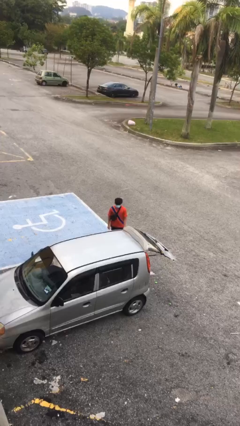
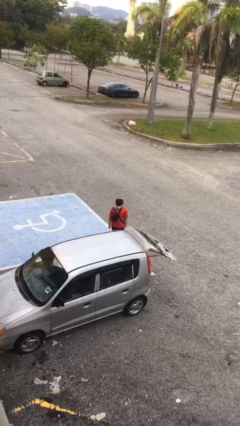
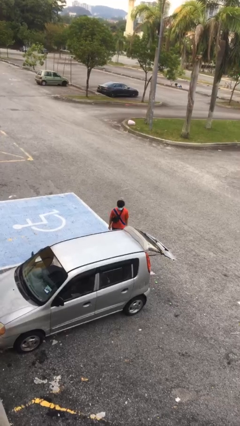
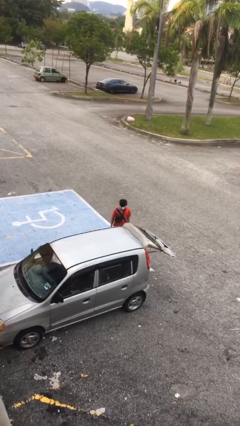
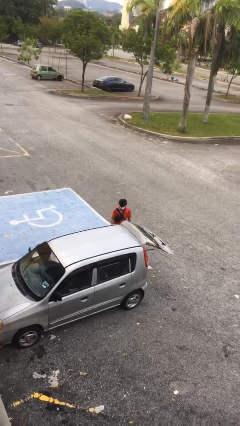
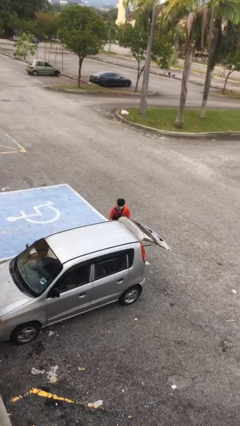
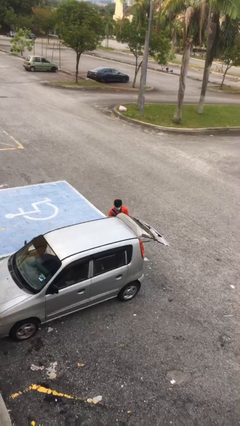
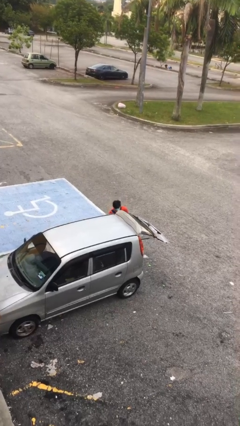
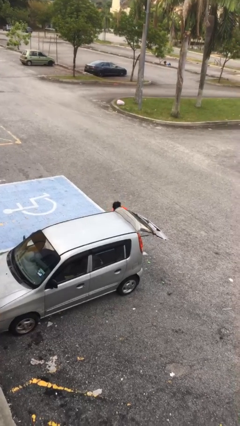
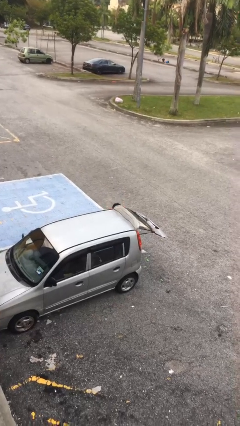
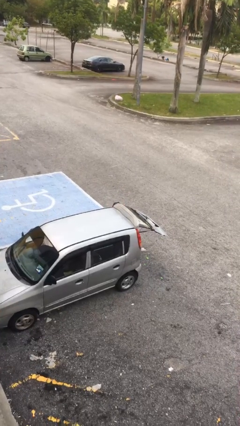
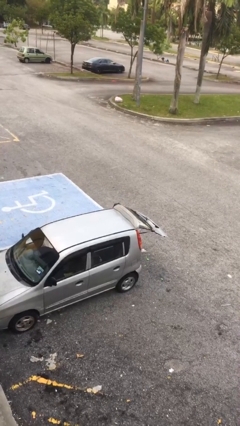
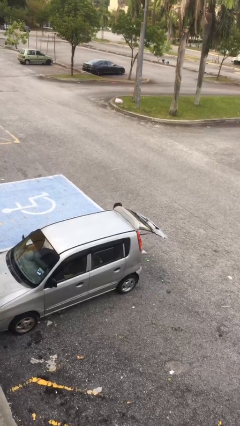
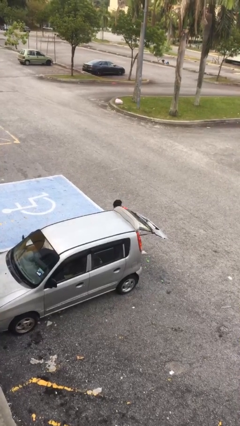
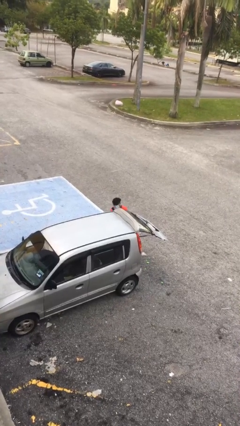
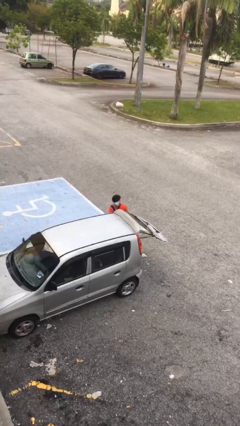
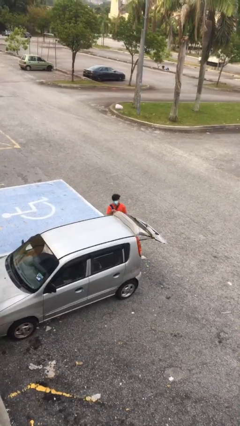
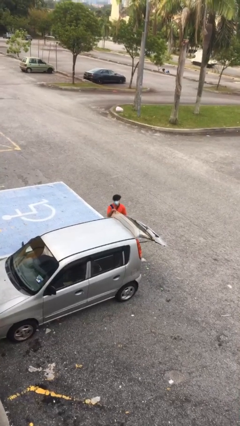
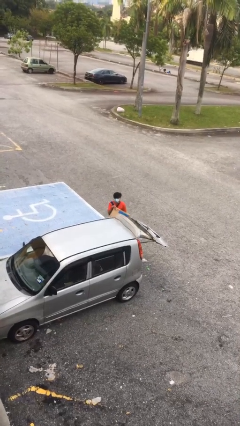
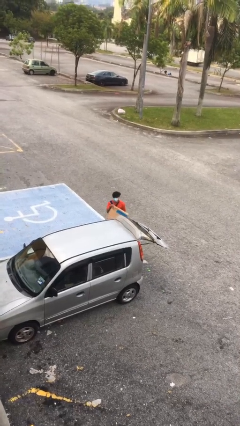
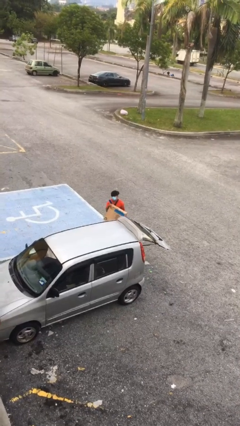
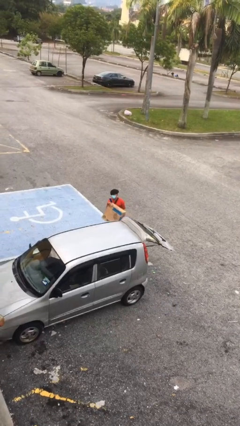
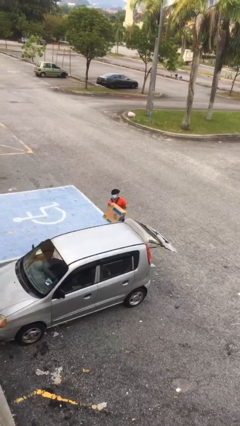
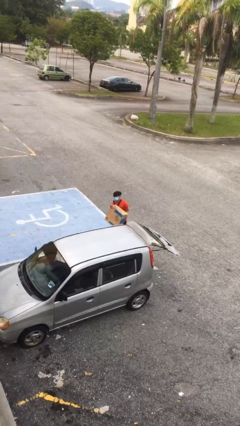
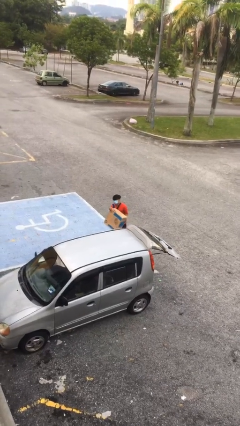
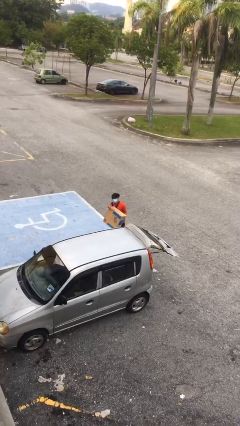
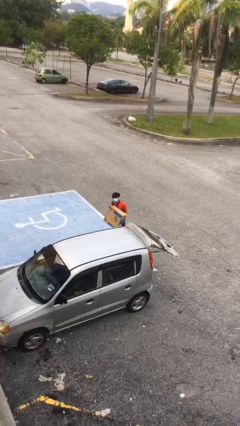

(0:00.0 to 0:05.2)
person unloads car

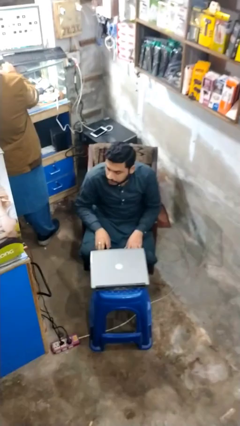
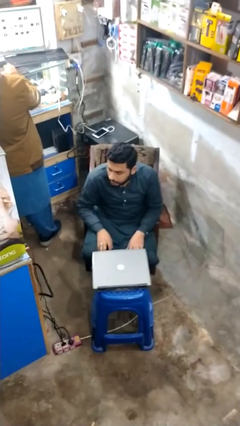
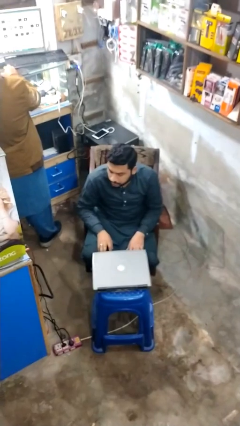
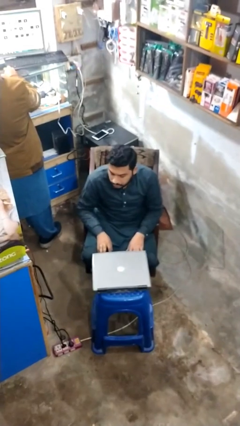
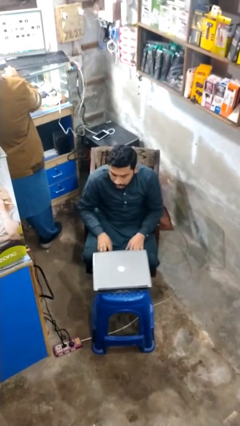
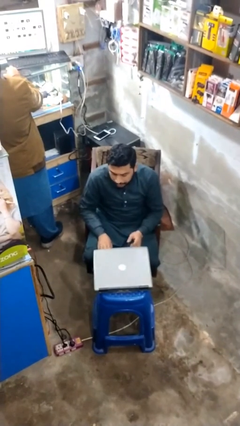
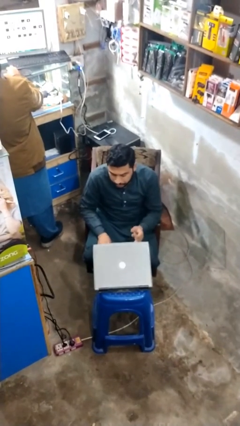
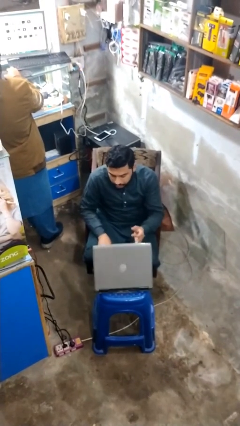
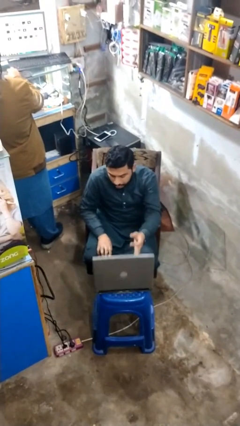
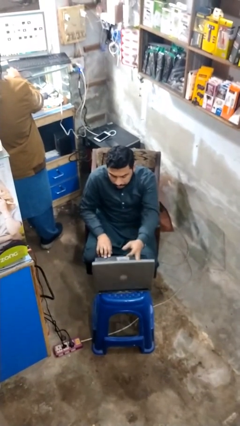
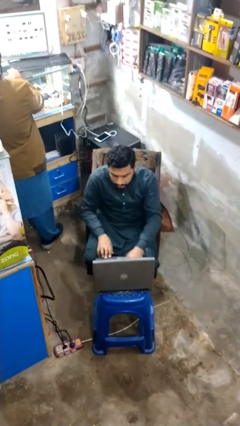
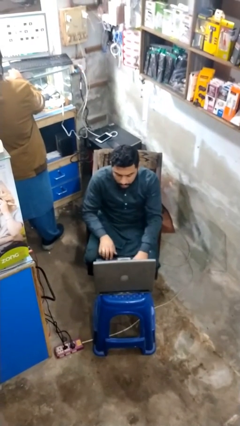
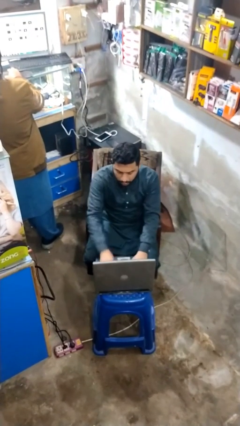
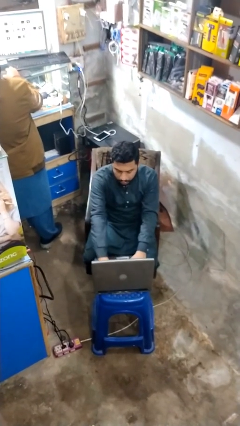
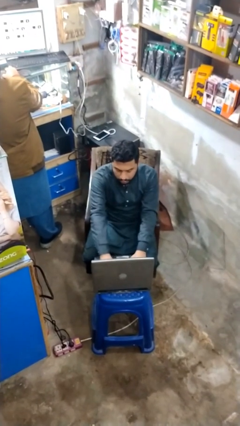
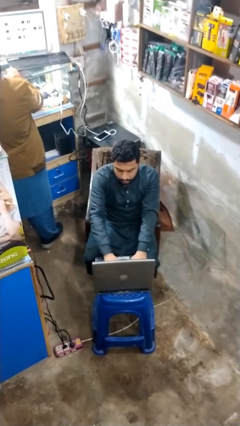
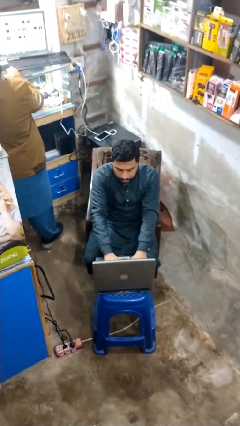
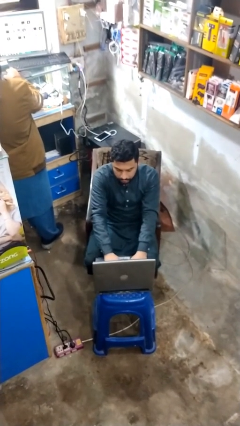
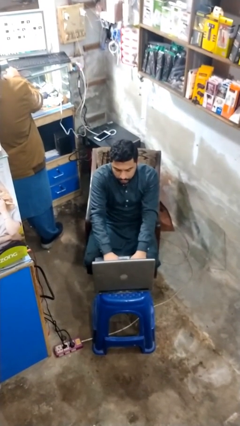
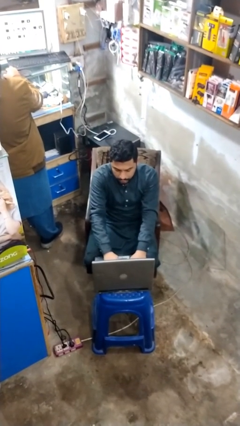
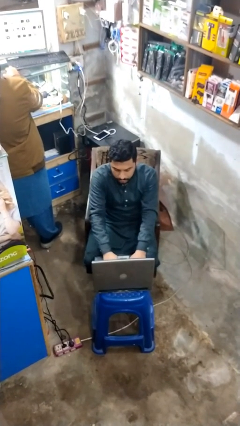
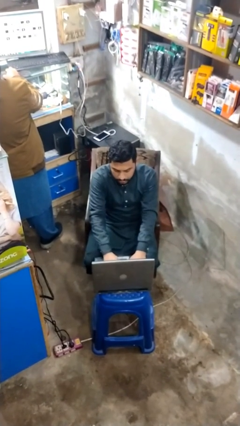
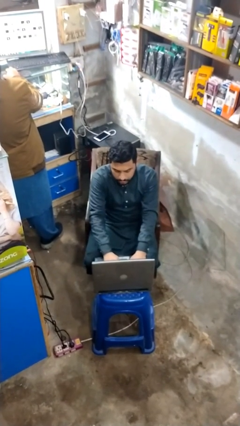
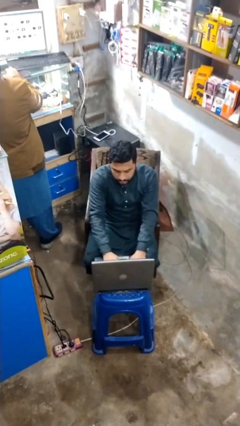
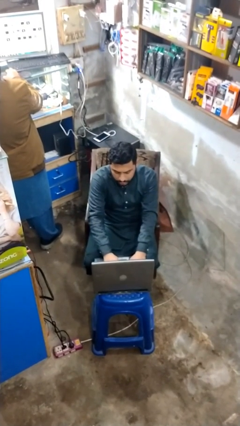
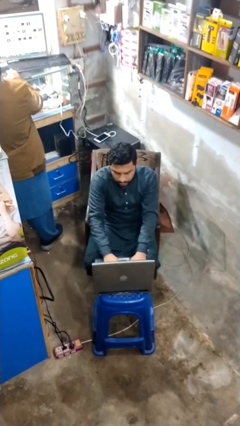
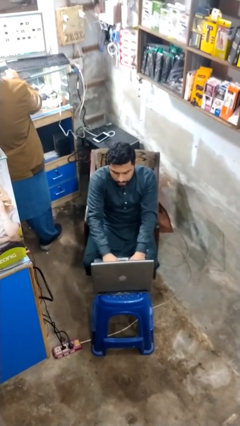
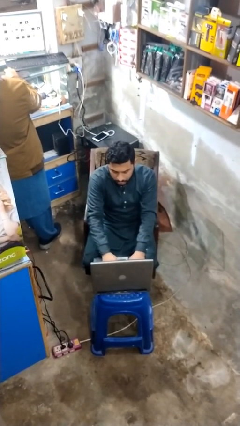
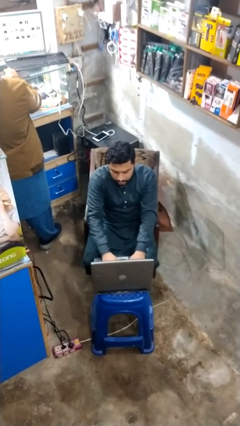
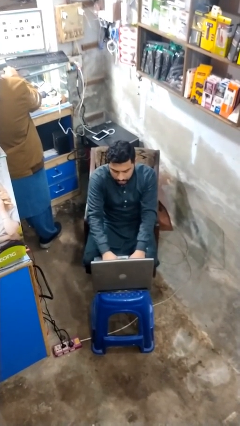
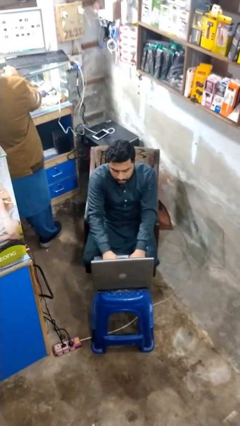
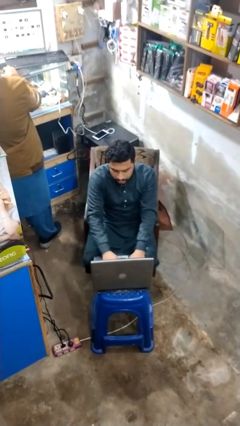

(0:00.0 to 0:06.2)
person interacts with laptop

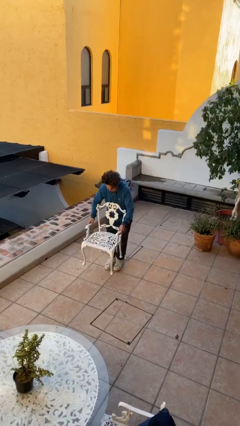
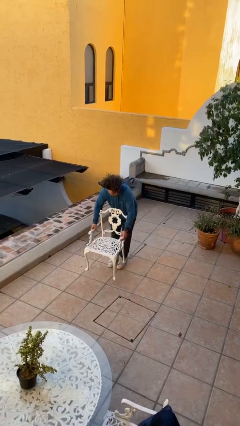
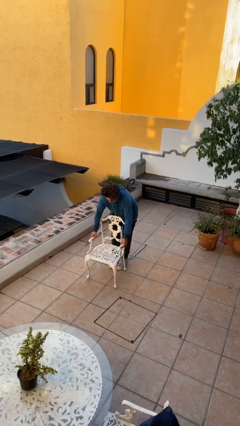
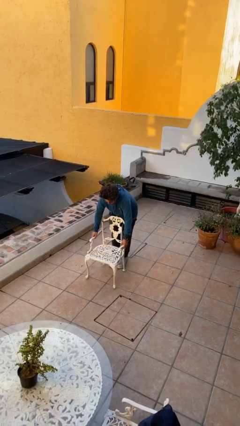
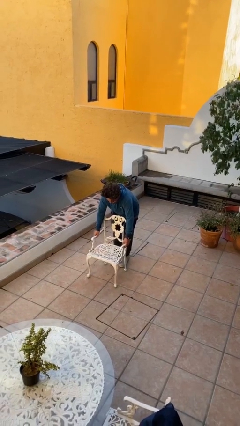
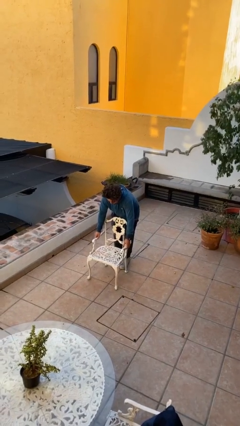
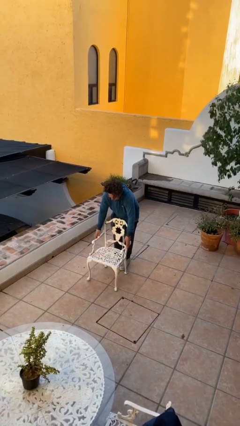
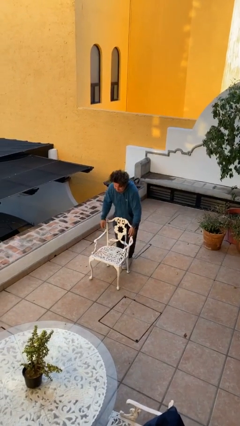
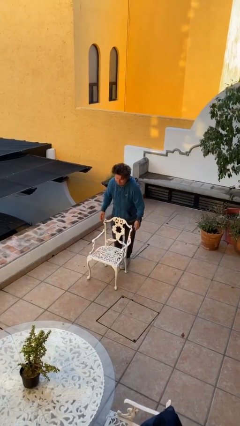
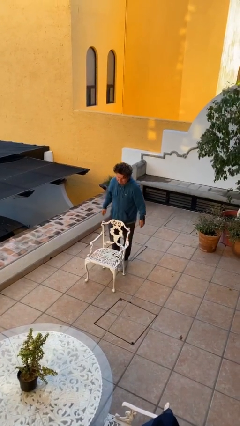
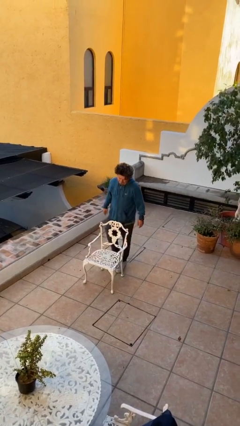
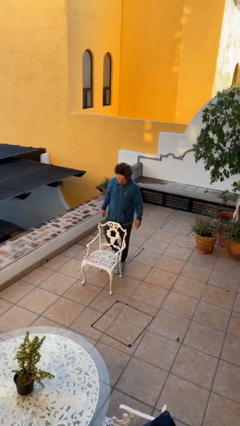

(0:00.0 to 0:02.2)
person puts down object on floor

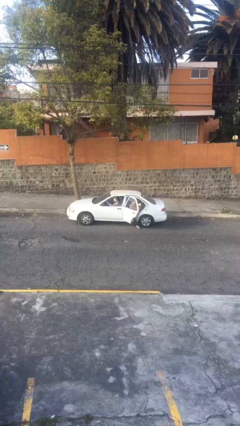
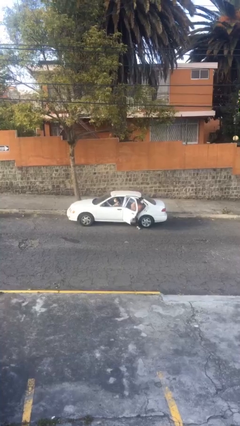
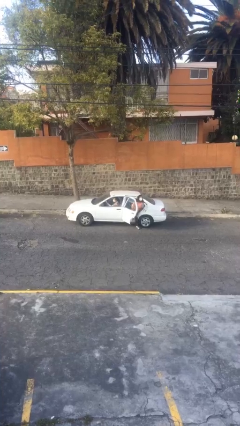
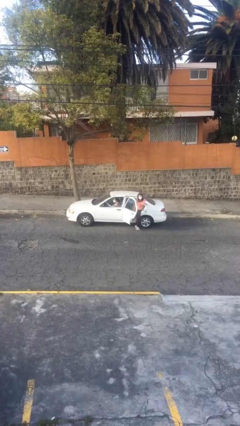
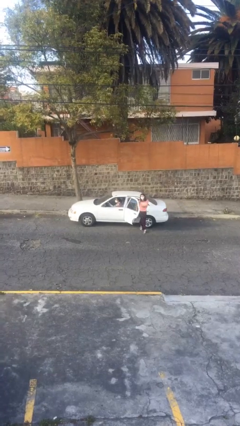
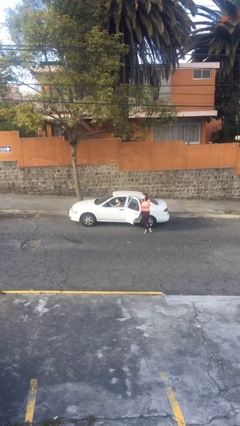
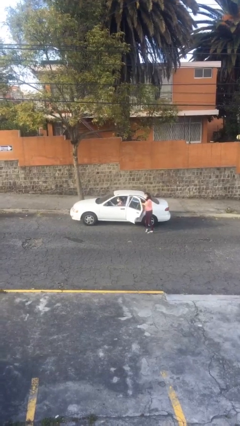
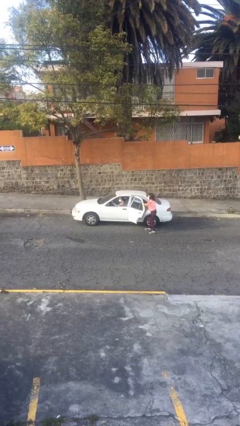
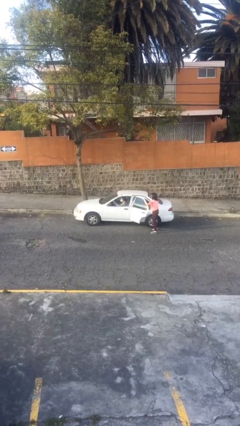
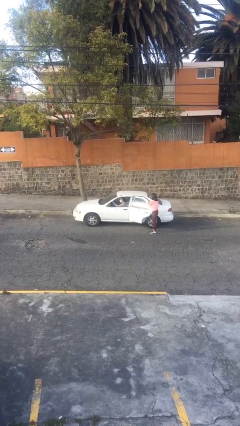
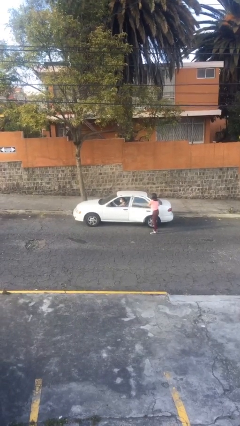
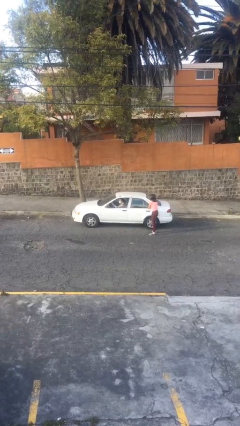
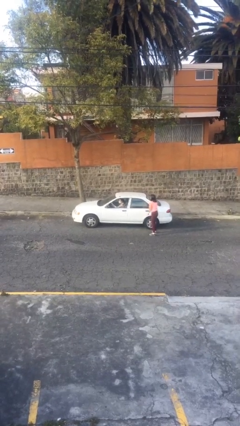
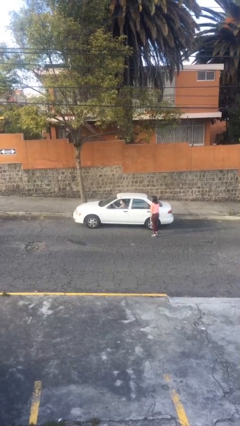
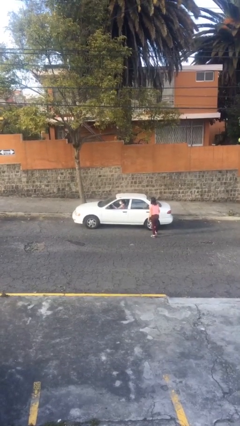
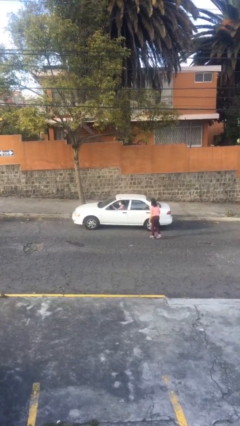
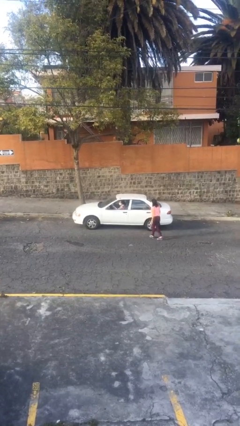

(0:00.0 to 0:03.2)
car drops off person

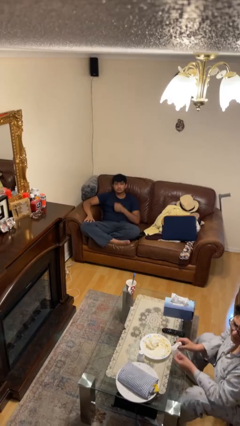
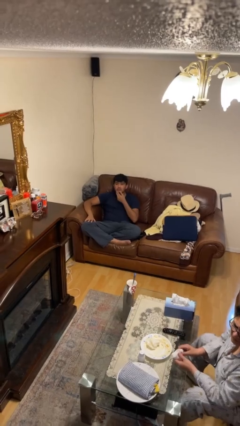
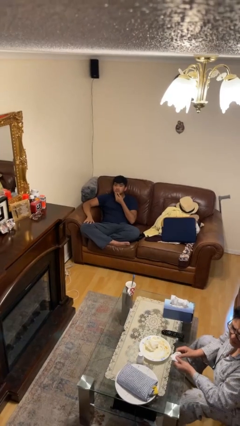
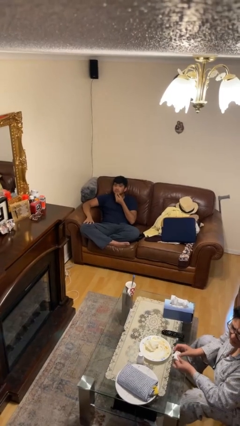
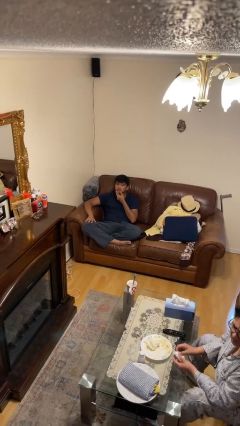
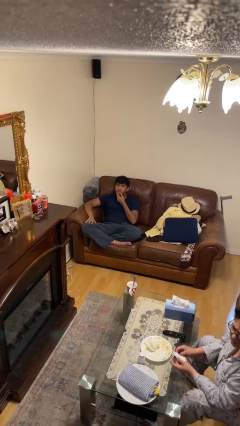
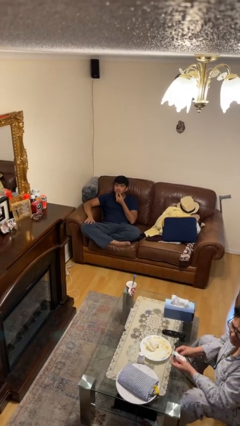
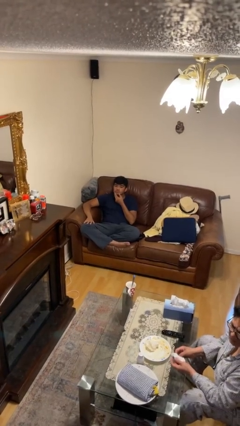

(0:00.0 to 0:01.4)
person strokes chin
